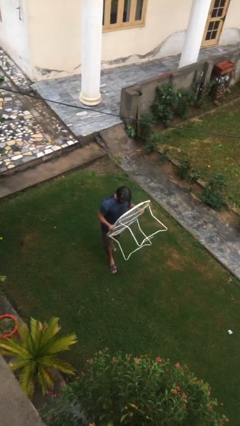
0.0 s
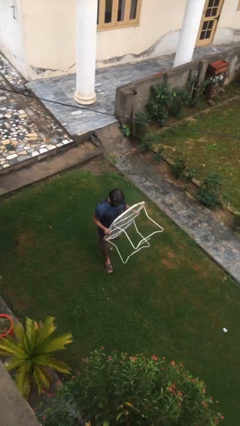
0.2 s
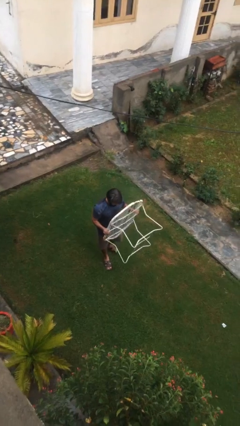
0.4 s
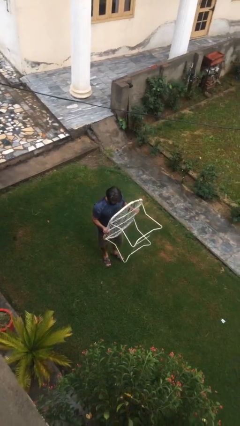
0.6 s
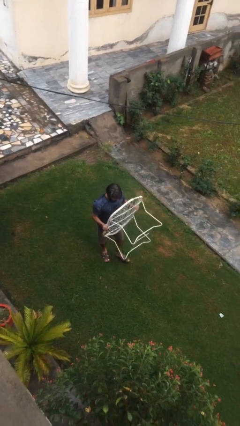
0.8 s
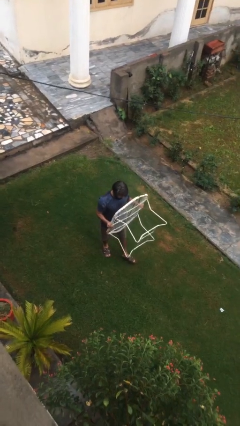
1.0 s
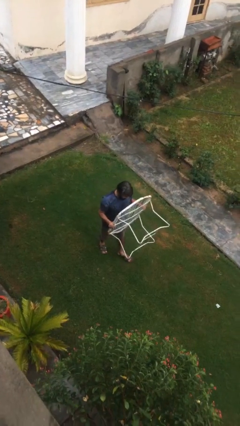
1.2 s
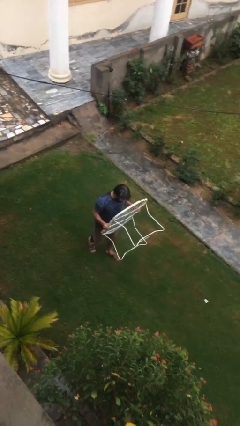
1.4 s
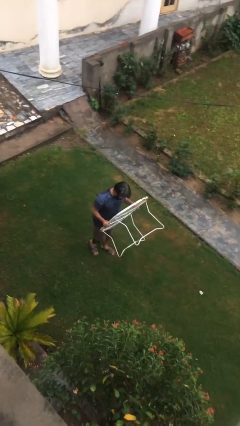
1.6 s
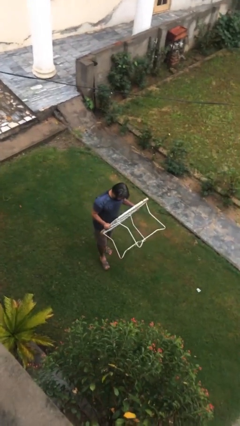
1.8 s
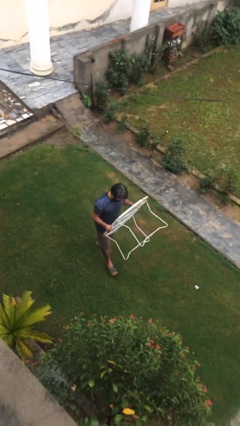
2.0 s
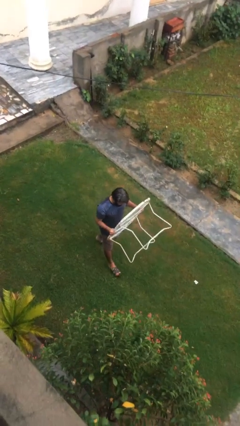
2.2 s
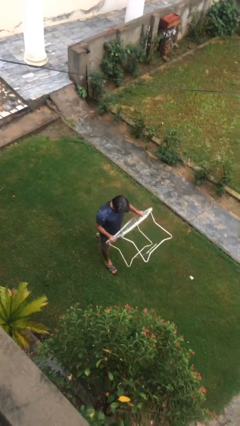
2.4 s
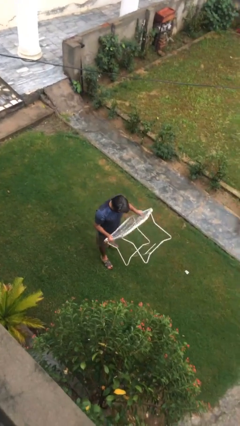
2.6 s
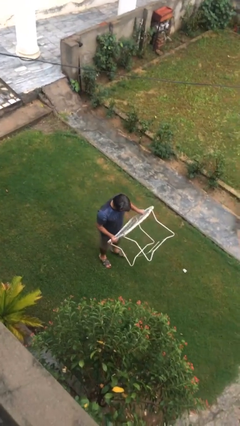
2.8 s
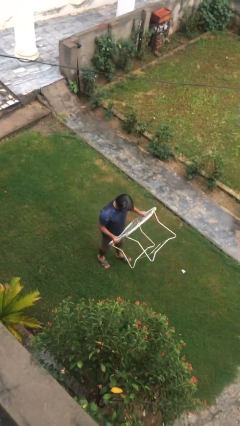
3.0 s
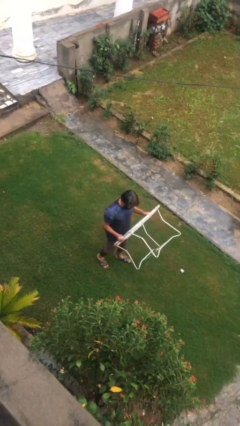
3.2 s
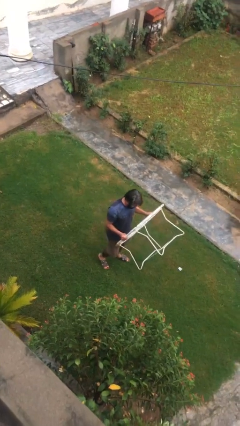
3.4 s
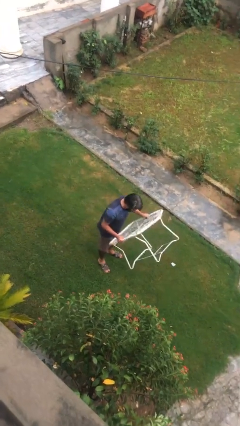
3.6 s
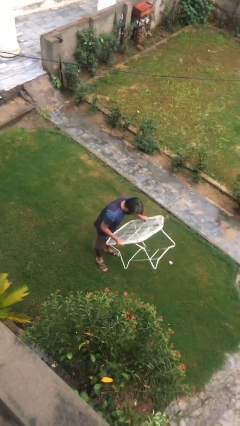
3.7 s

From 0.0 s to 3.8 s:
person carries heavy object

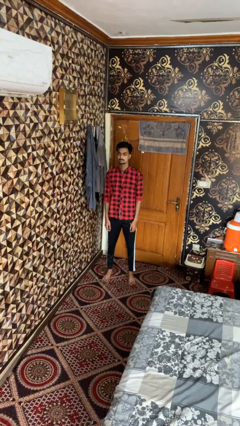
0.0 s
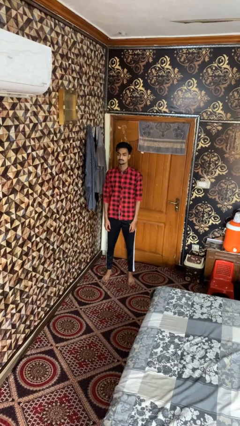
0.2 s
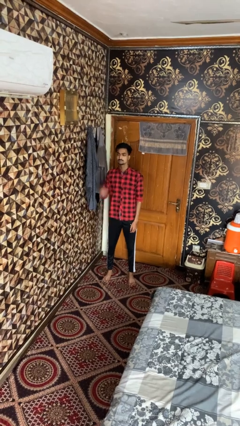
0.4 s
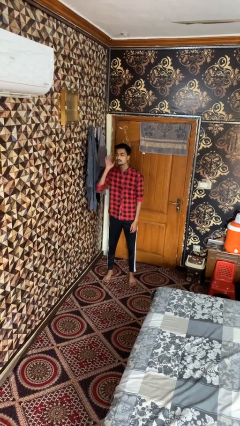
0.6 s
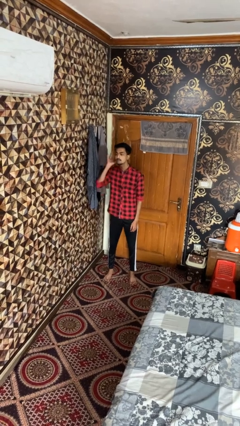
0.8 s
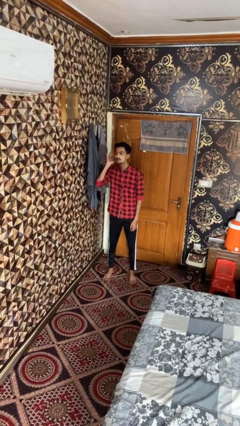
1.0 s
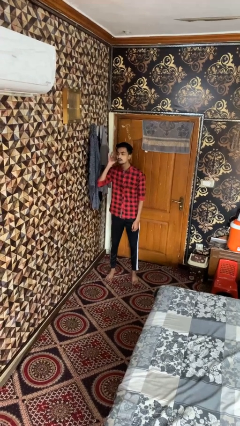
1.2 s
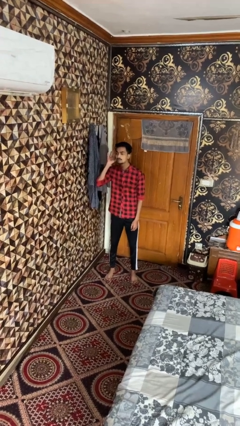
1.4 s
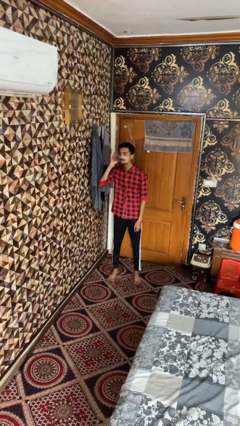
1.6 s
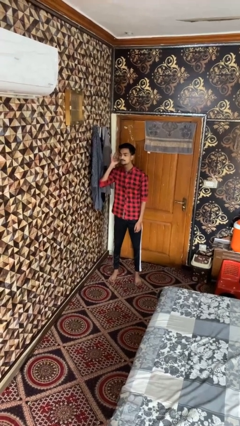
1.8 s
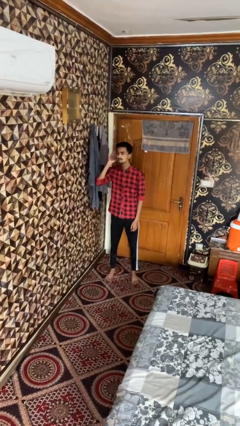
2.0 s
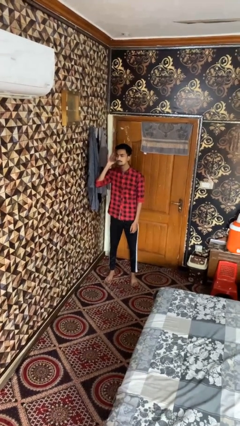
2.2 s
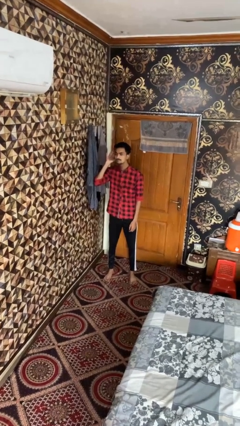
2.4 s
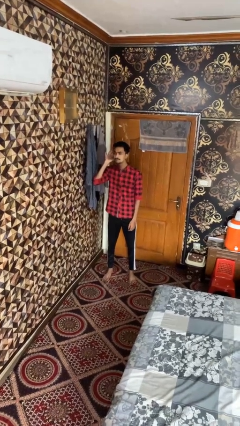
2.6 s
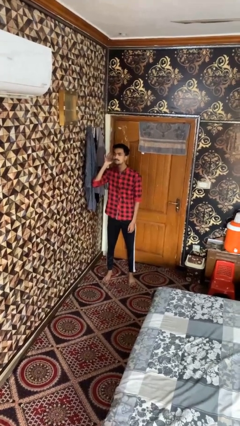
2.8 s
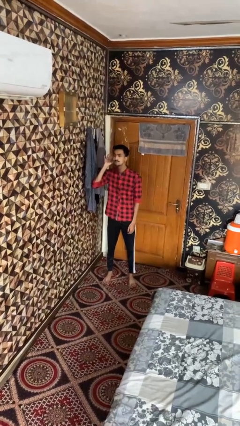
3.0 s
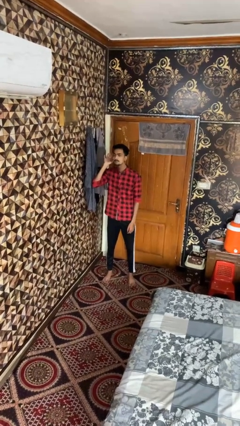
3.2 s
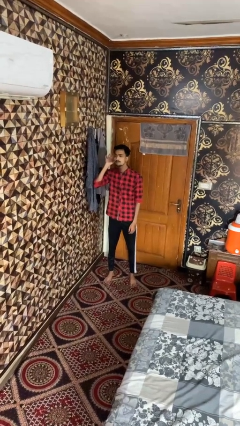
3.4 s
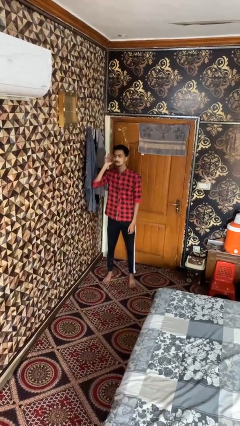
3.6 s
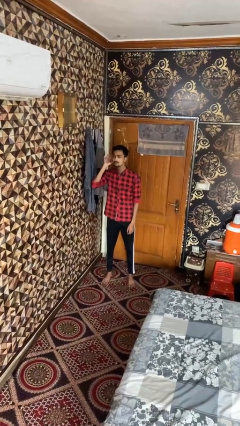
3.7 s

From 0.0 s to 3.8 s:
person gestures listen closely

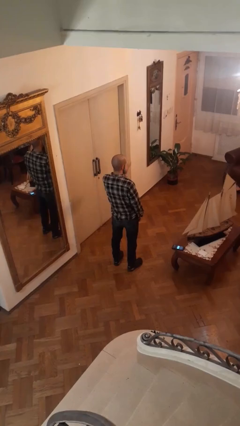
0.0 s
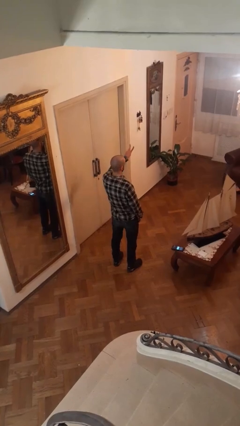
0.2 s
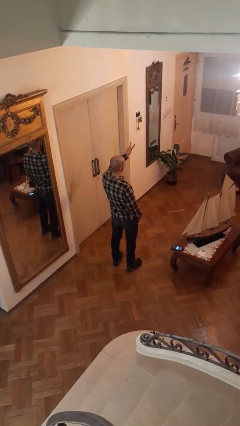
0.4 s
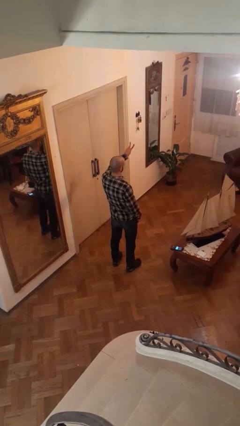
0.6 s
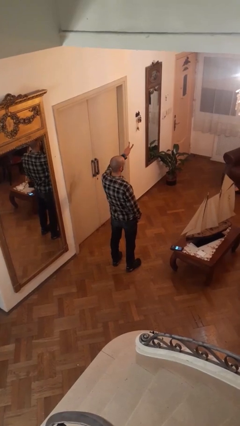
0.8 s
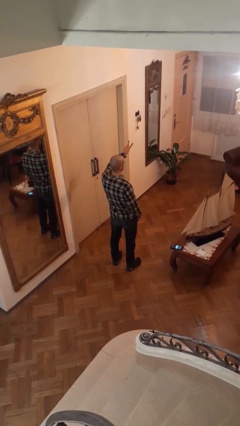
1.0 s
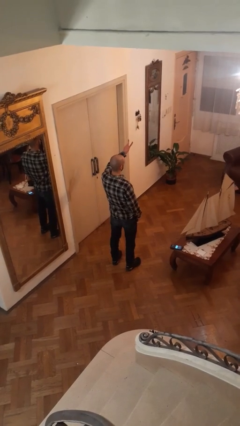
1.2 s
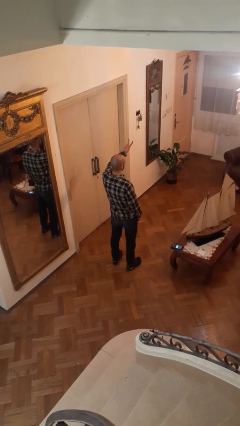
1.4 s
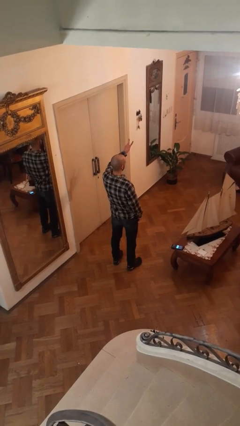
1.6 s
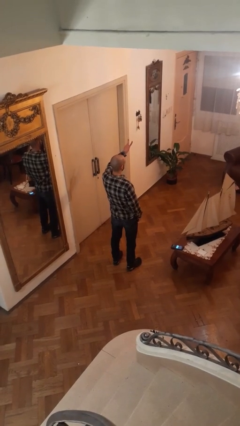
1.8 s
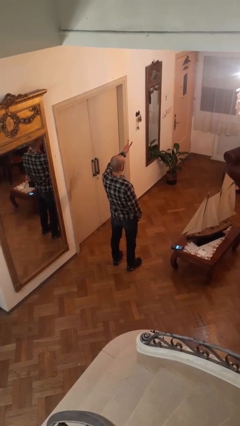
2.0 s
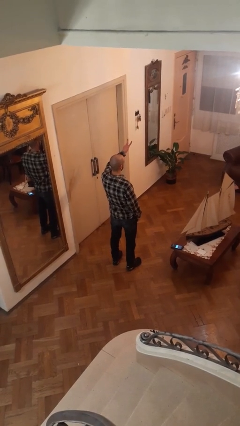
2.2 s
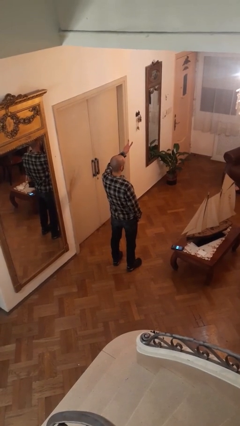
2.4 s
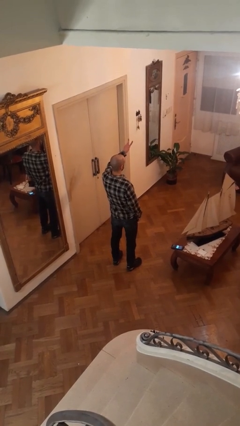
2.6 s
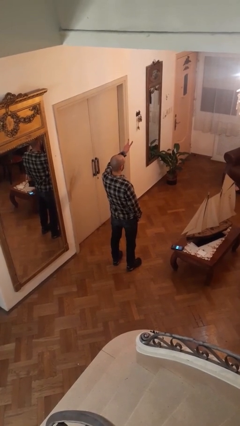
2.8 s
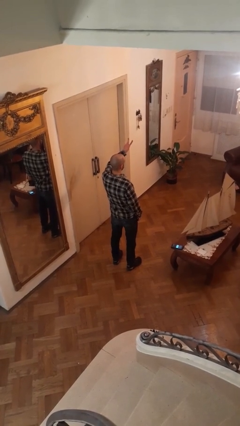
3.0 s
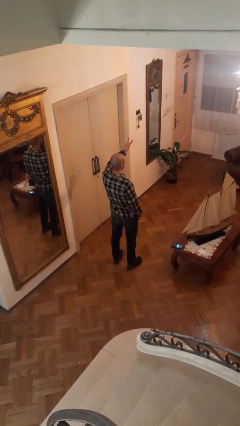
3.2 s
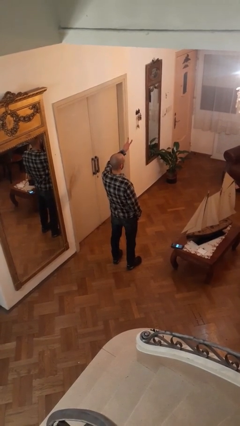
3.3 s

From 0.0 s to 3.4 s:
person gestures peace

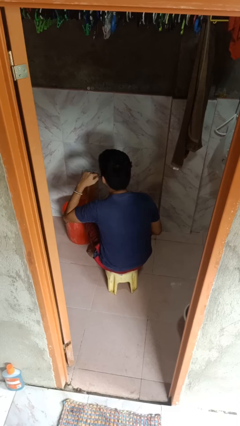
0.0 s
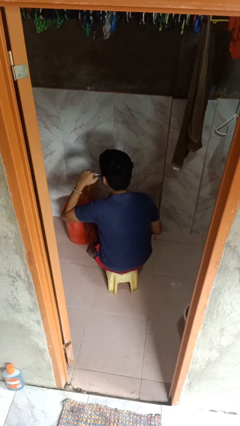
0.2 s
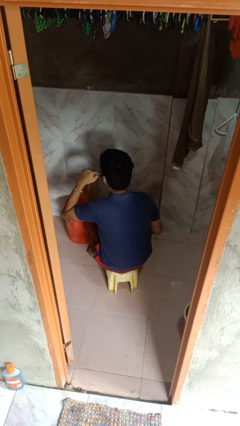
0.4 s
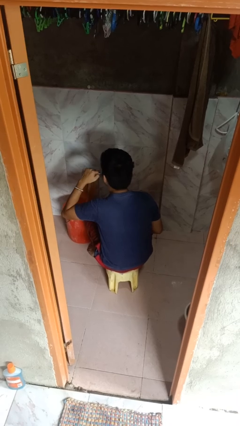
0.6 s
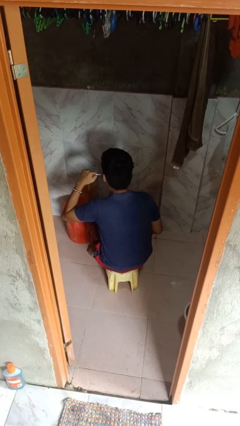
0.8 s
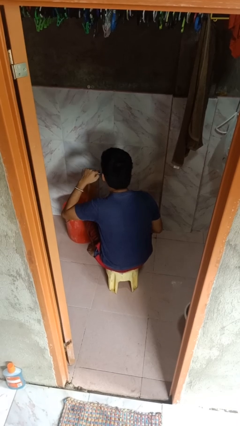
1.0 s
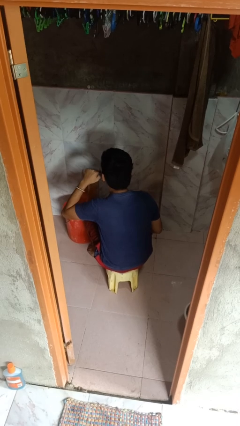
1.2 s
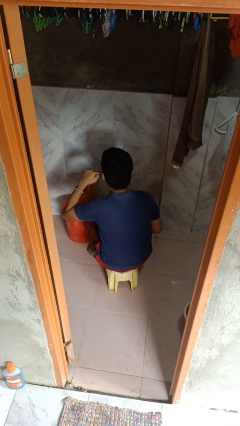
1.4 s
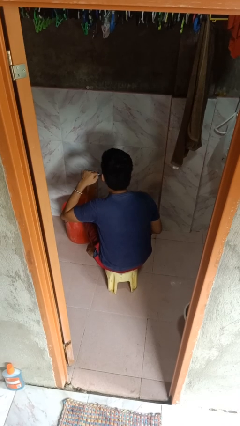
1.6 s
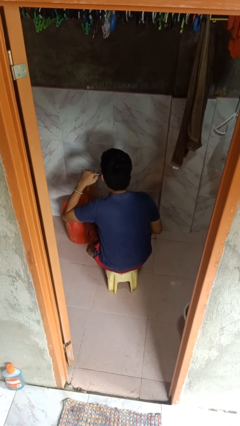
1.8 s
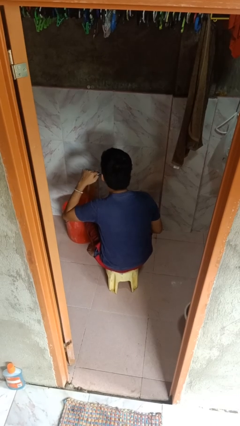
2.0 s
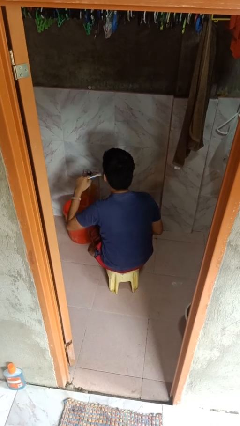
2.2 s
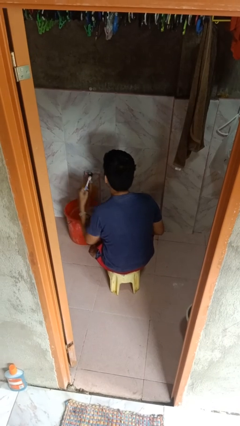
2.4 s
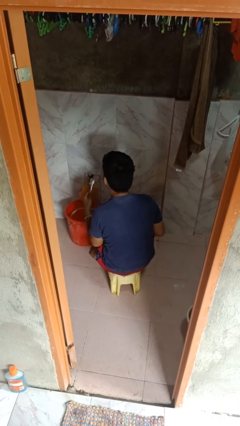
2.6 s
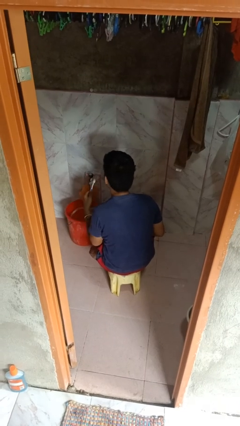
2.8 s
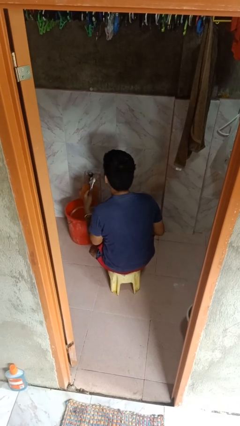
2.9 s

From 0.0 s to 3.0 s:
person brushes teeth

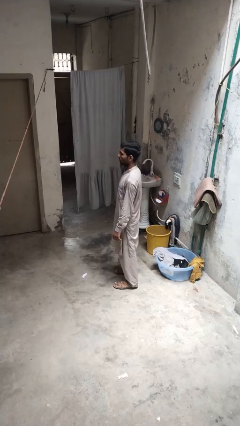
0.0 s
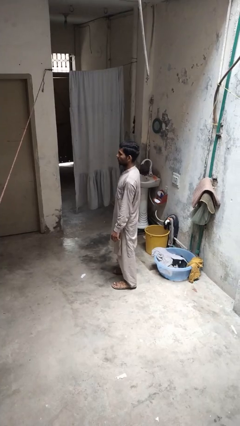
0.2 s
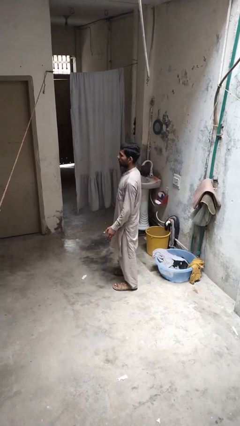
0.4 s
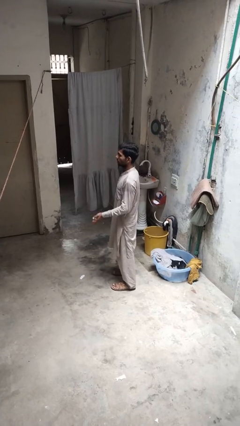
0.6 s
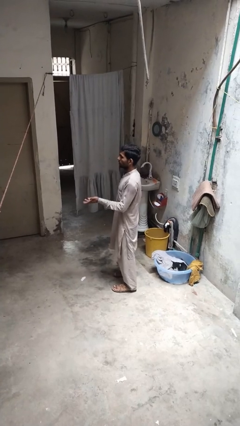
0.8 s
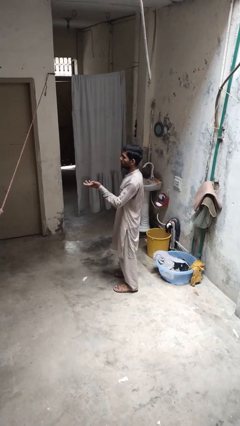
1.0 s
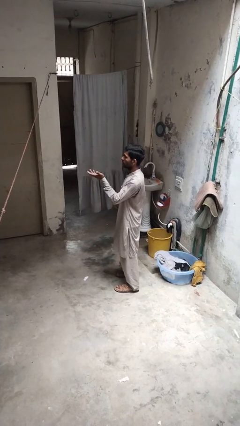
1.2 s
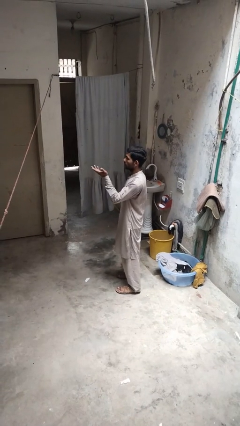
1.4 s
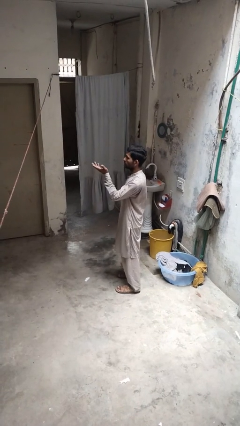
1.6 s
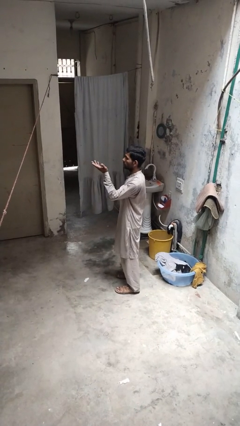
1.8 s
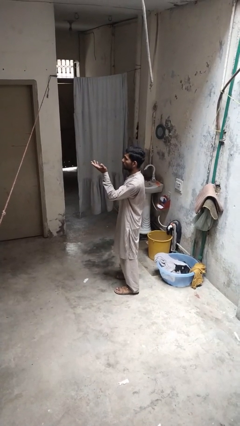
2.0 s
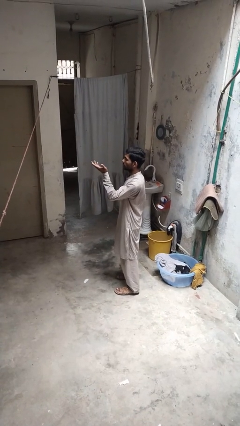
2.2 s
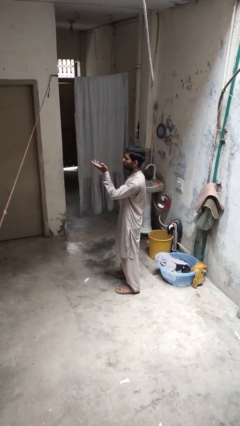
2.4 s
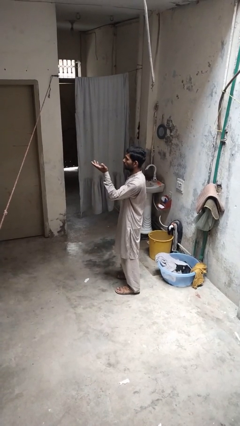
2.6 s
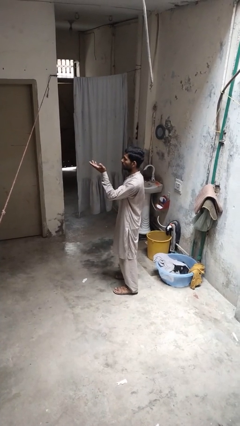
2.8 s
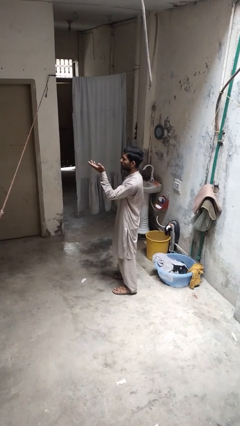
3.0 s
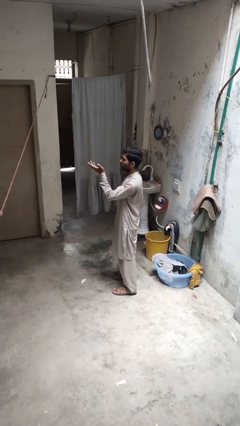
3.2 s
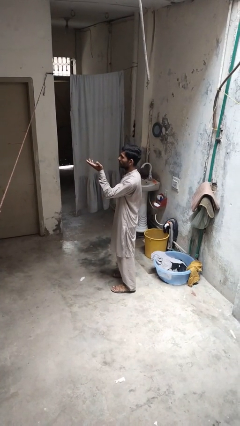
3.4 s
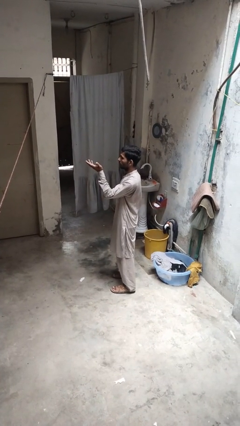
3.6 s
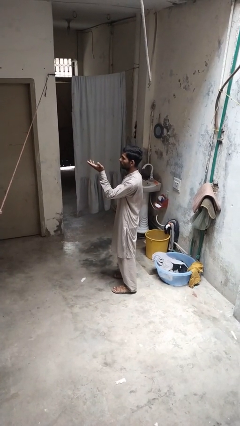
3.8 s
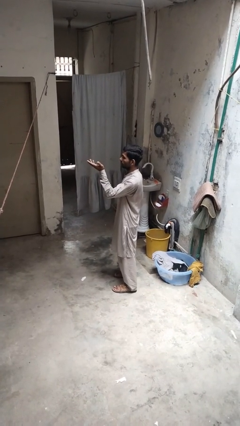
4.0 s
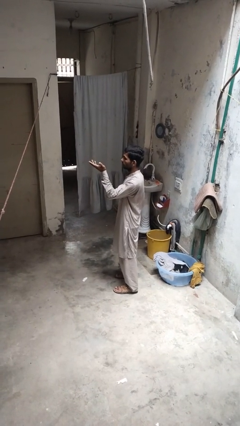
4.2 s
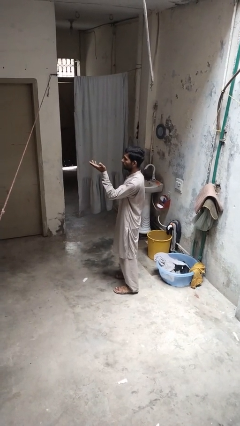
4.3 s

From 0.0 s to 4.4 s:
person gestures swipe up
